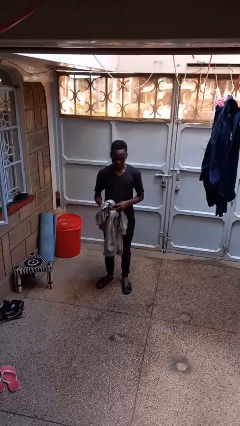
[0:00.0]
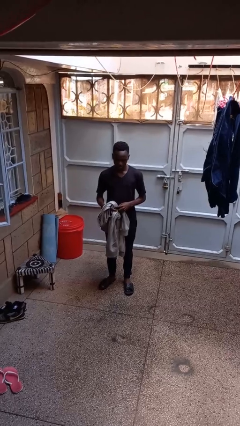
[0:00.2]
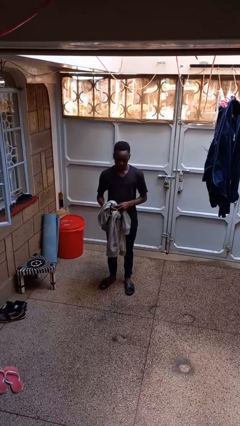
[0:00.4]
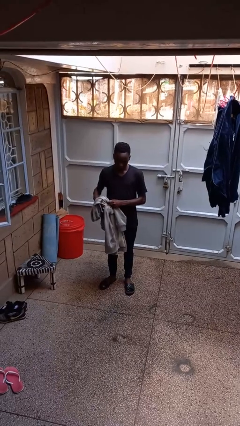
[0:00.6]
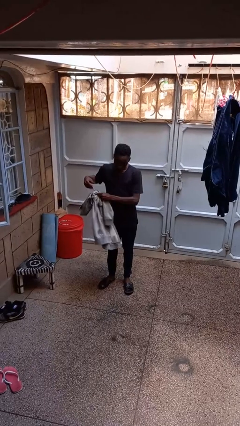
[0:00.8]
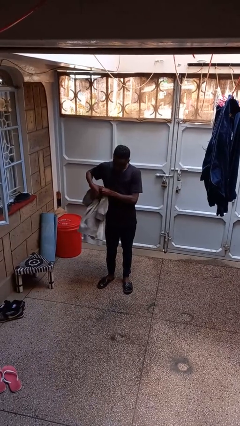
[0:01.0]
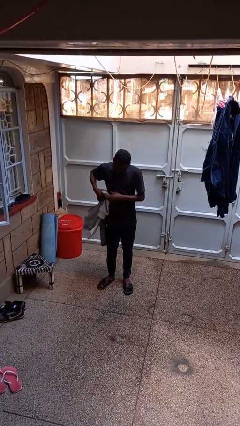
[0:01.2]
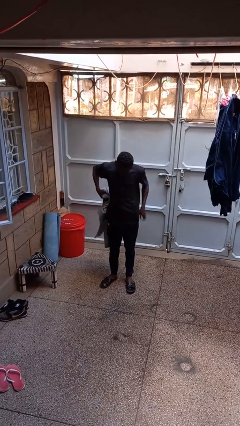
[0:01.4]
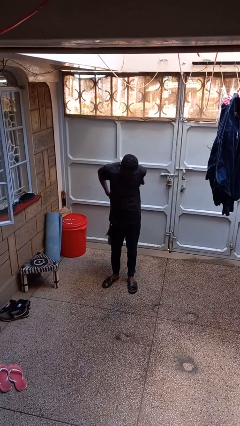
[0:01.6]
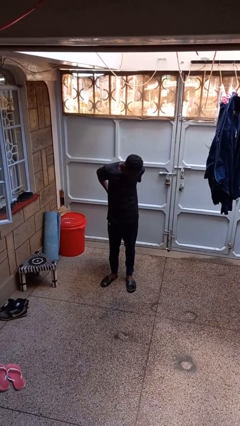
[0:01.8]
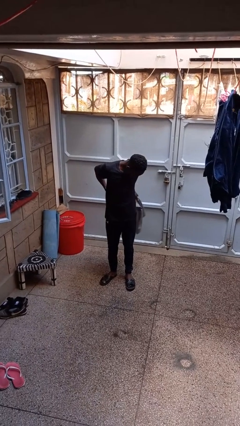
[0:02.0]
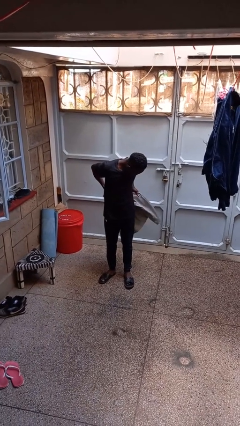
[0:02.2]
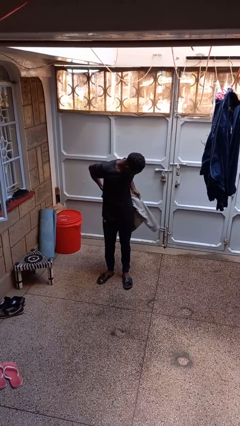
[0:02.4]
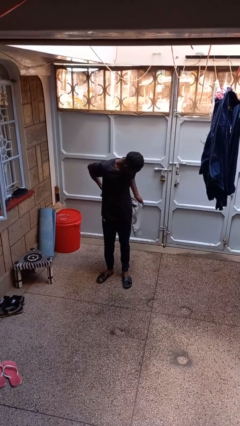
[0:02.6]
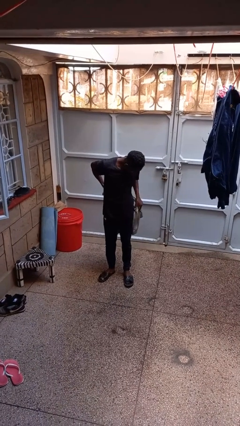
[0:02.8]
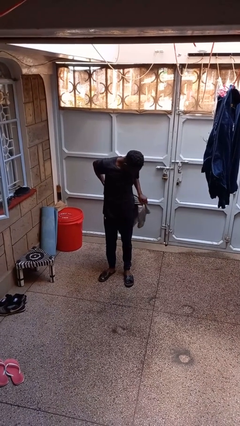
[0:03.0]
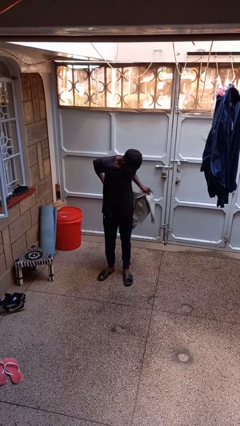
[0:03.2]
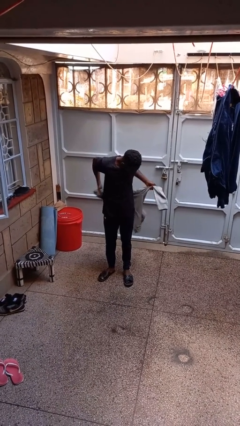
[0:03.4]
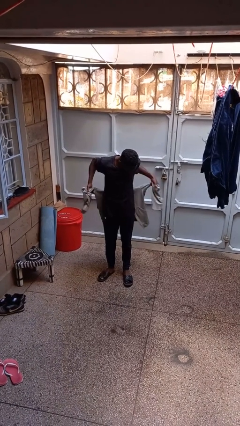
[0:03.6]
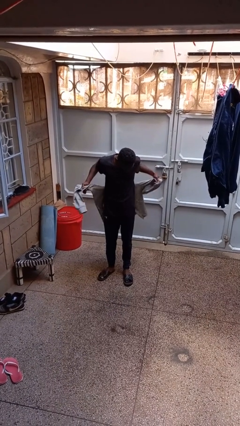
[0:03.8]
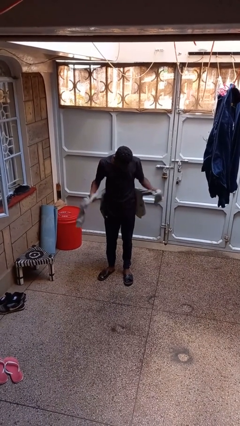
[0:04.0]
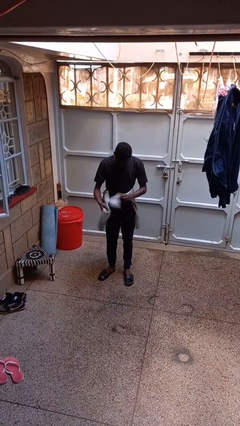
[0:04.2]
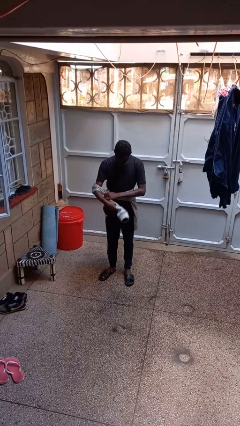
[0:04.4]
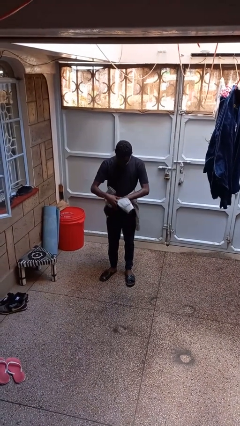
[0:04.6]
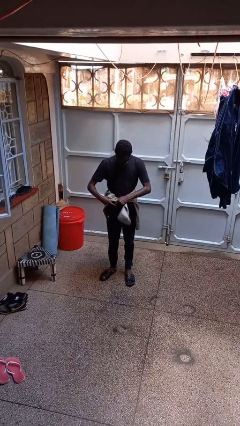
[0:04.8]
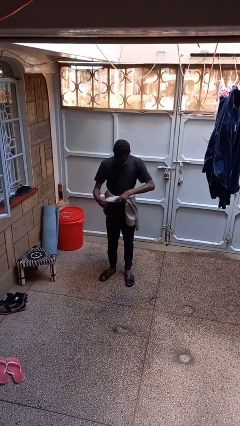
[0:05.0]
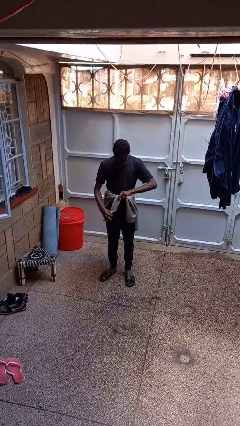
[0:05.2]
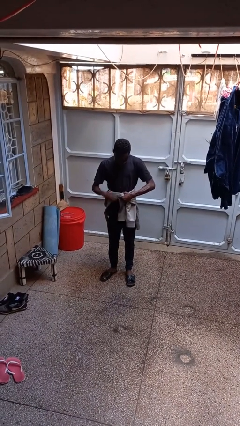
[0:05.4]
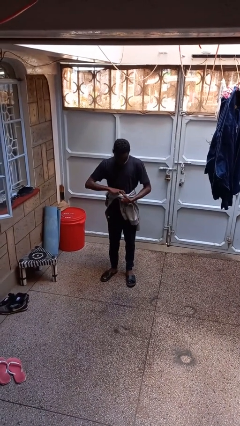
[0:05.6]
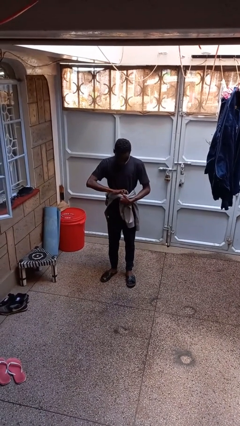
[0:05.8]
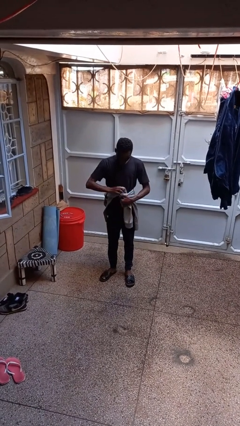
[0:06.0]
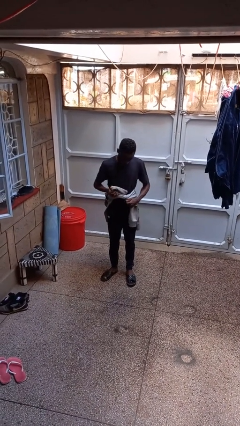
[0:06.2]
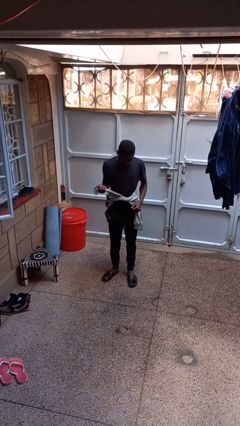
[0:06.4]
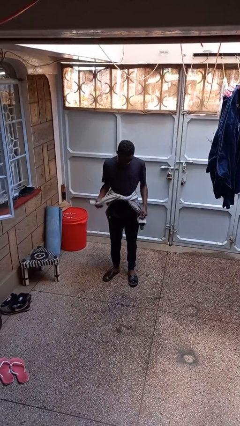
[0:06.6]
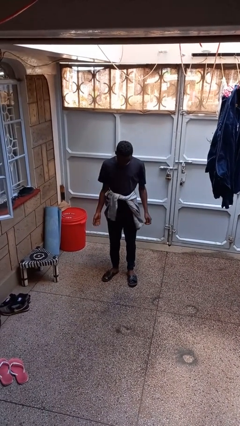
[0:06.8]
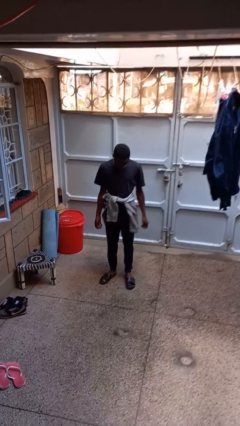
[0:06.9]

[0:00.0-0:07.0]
person ties jacket around waist

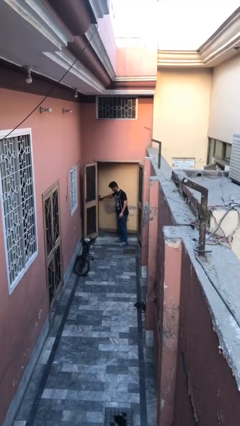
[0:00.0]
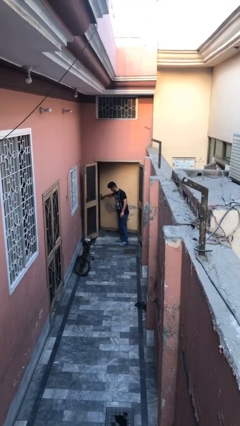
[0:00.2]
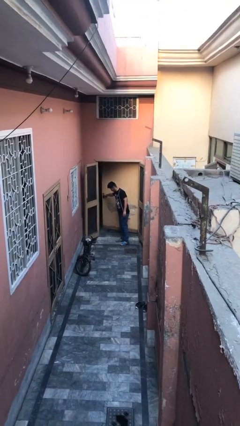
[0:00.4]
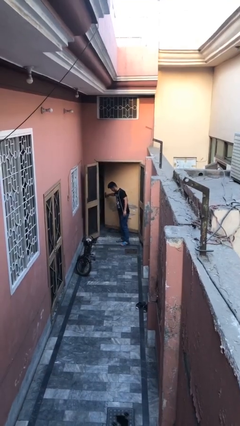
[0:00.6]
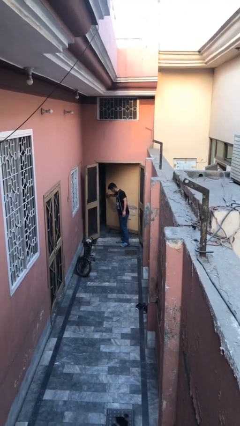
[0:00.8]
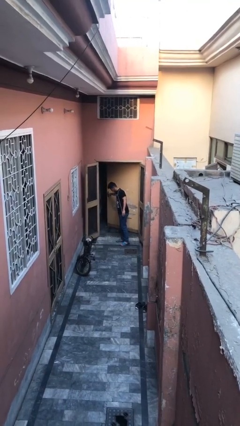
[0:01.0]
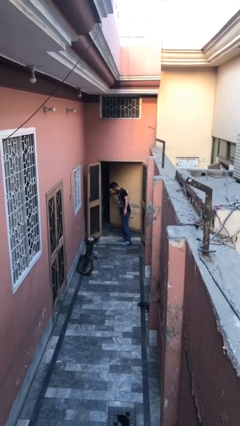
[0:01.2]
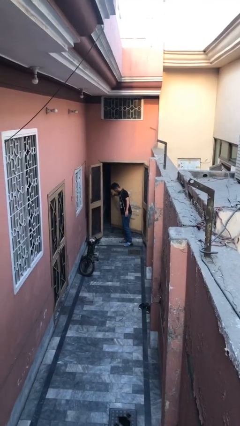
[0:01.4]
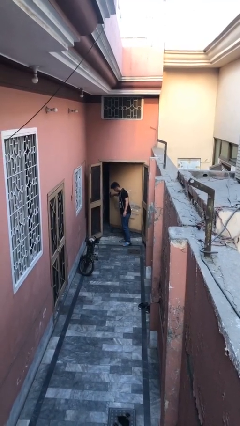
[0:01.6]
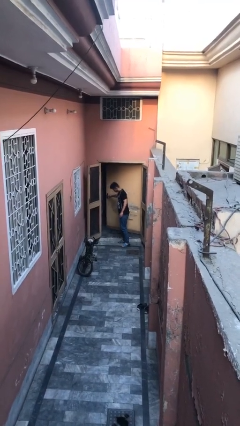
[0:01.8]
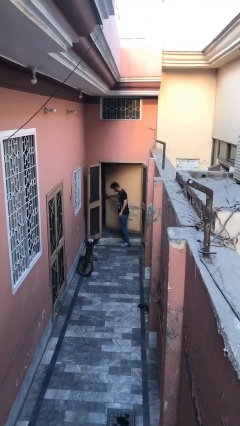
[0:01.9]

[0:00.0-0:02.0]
person opens facility door

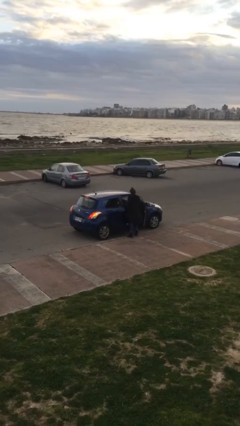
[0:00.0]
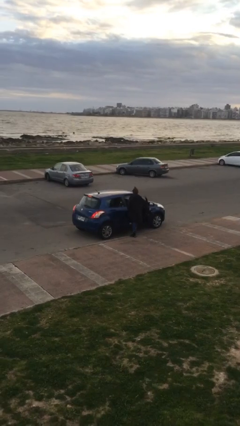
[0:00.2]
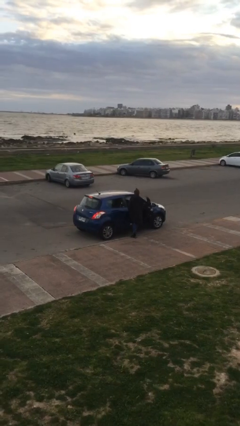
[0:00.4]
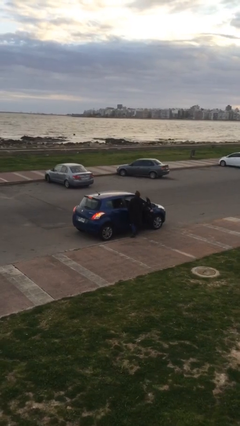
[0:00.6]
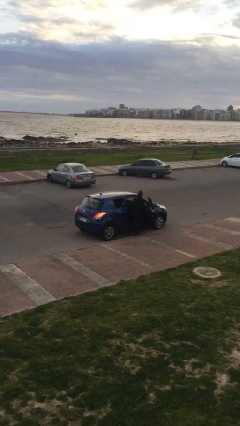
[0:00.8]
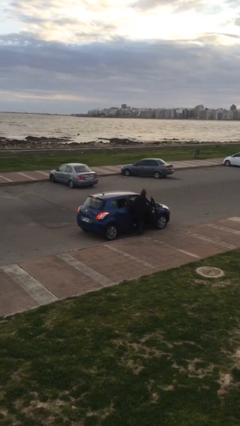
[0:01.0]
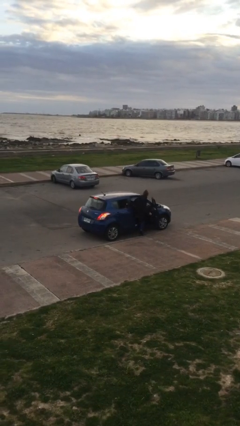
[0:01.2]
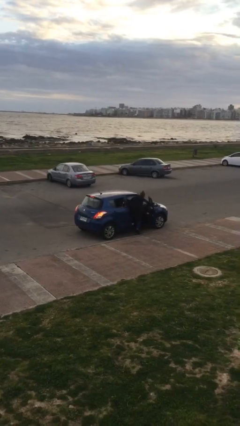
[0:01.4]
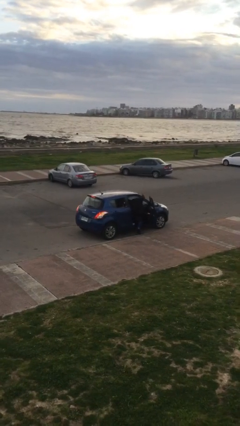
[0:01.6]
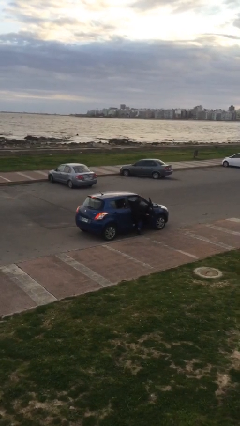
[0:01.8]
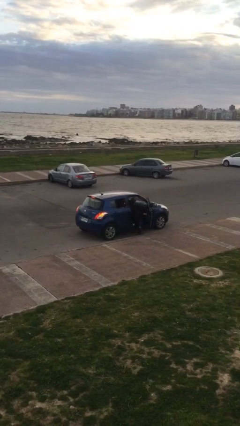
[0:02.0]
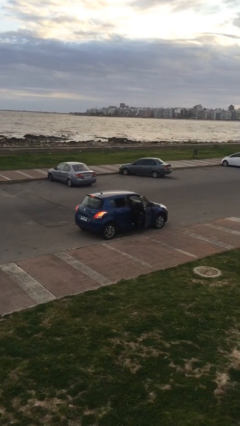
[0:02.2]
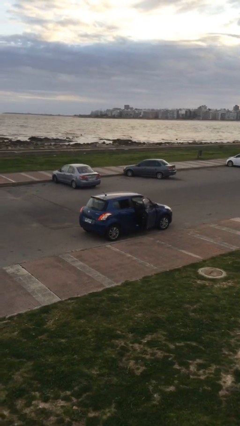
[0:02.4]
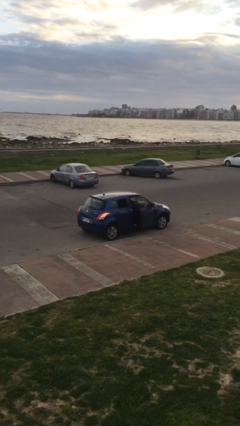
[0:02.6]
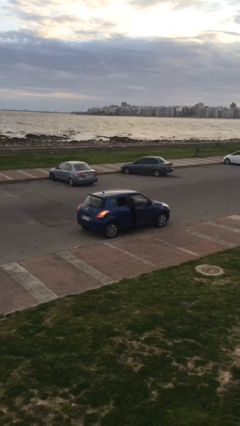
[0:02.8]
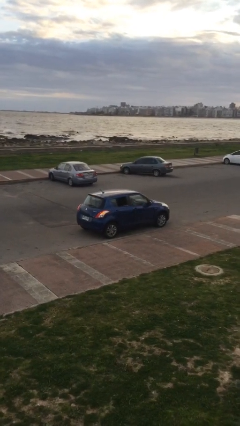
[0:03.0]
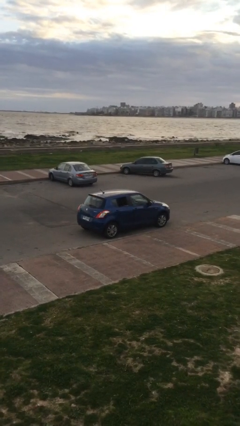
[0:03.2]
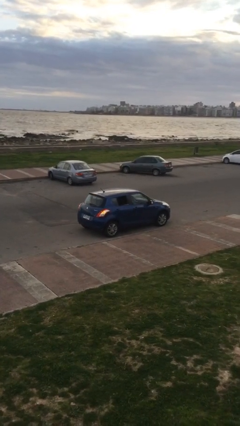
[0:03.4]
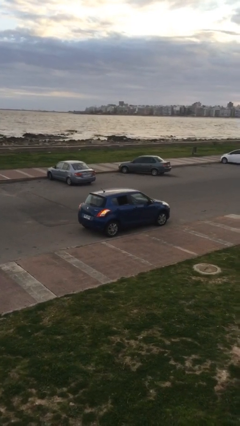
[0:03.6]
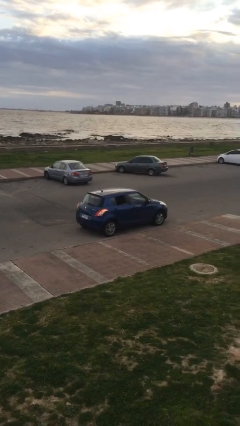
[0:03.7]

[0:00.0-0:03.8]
car picks up person

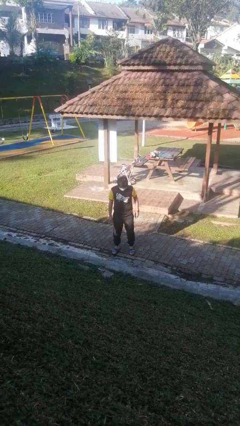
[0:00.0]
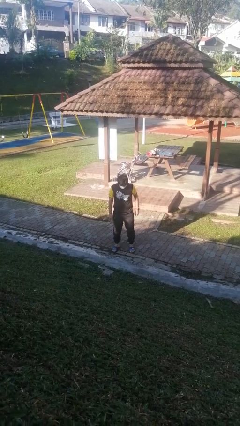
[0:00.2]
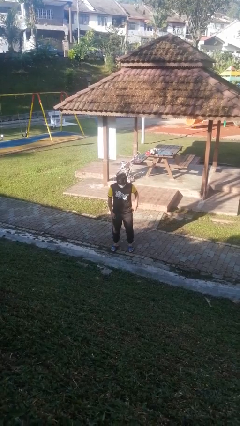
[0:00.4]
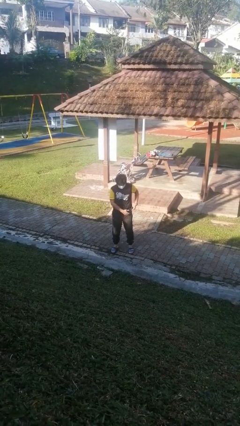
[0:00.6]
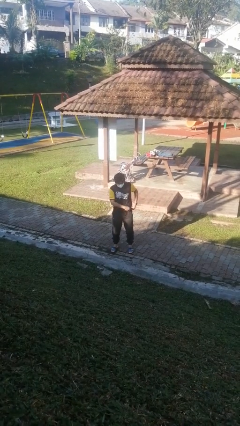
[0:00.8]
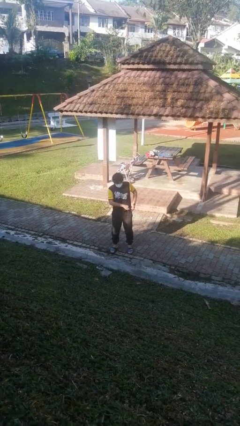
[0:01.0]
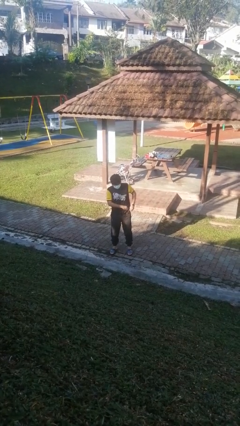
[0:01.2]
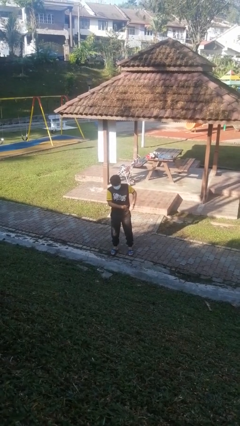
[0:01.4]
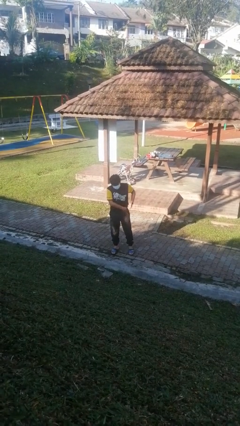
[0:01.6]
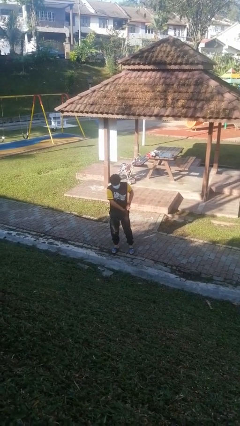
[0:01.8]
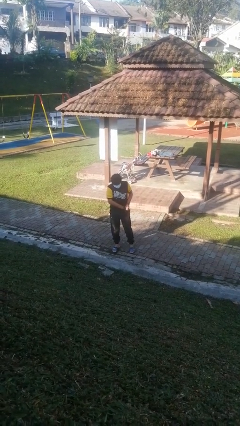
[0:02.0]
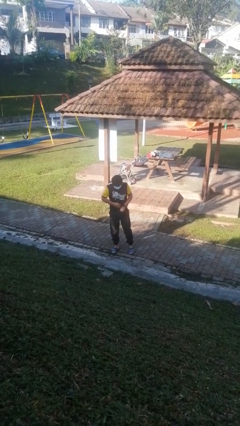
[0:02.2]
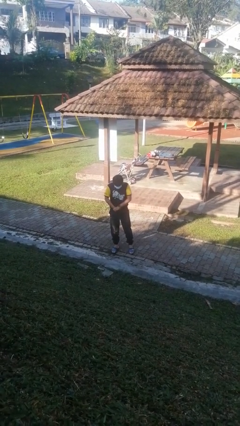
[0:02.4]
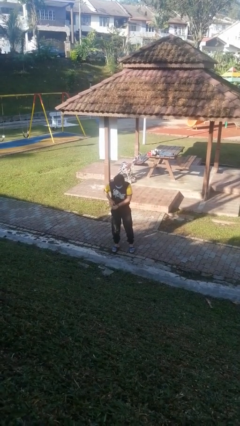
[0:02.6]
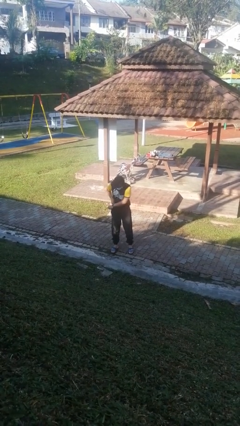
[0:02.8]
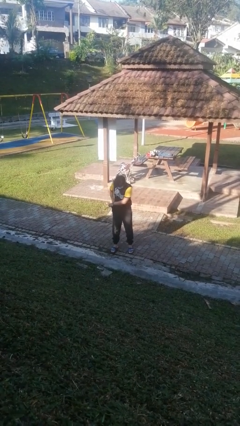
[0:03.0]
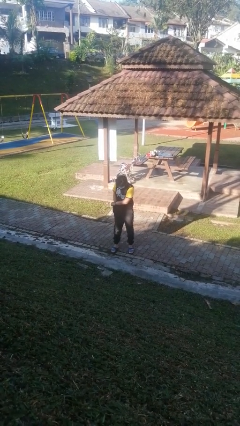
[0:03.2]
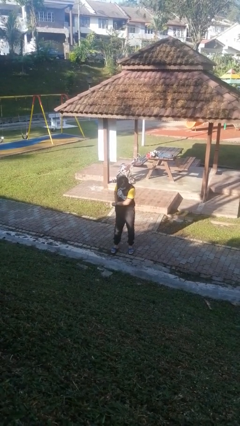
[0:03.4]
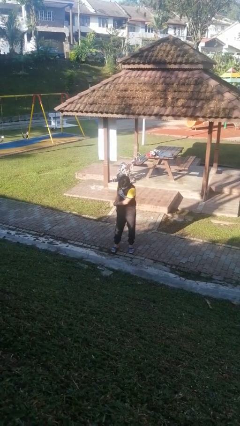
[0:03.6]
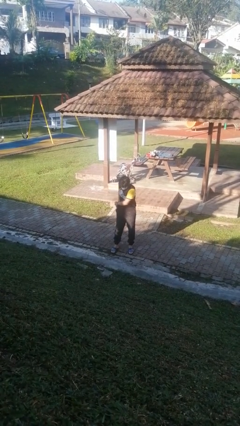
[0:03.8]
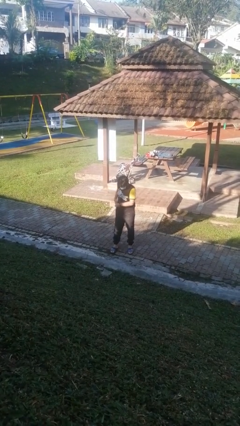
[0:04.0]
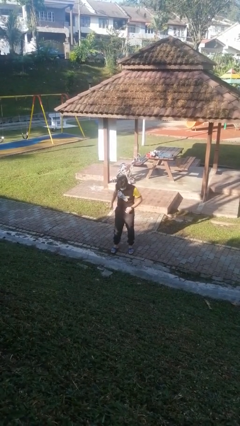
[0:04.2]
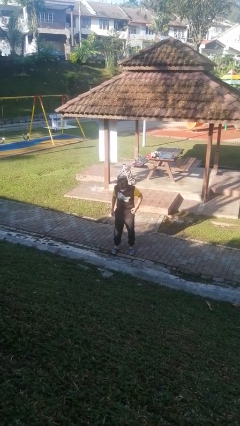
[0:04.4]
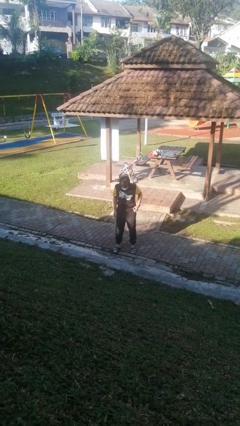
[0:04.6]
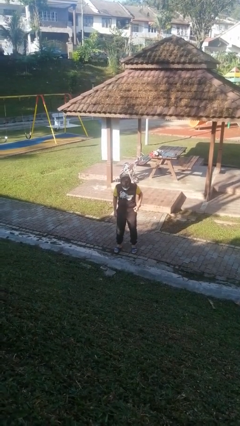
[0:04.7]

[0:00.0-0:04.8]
person tucks in shirt
